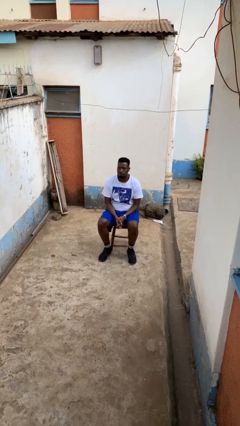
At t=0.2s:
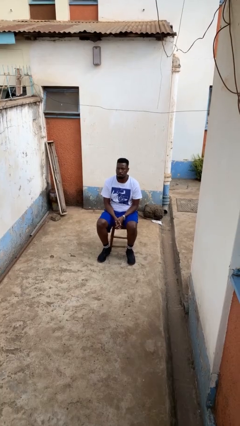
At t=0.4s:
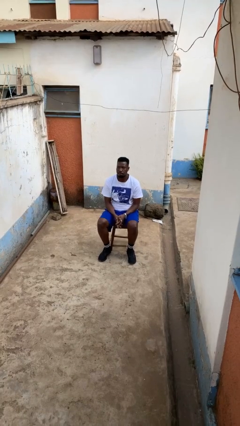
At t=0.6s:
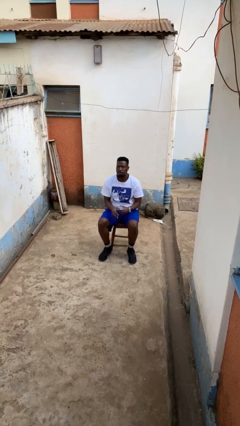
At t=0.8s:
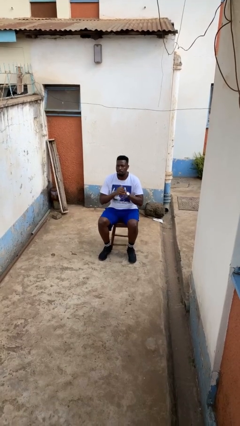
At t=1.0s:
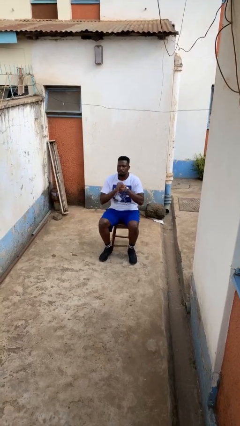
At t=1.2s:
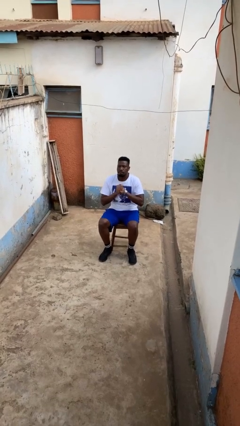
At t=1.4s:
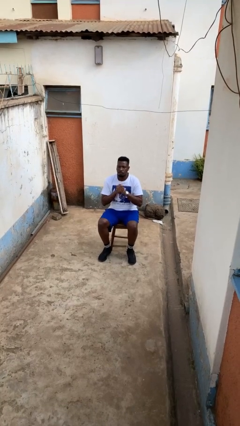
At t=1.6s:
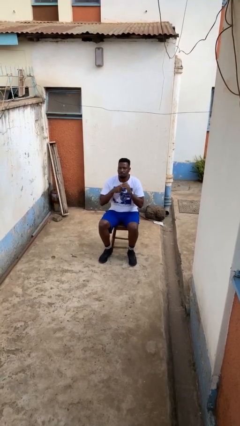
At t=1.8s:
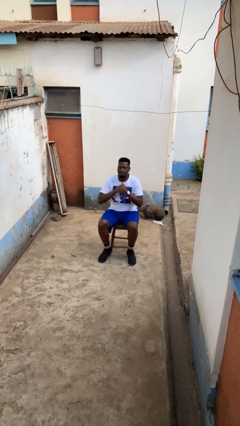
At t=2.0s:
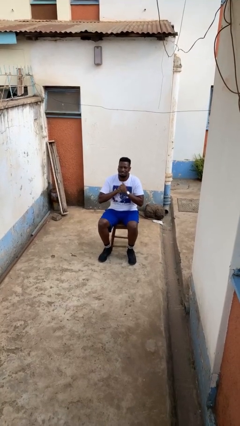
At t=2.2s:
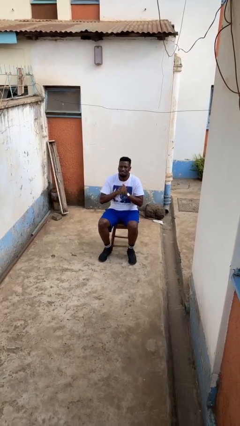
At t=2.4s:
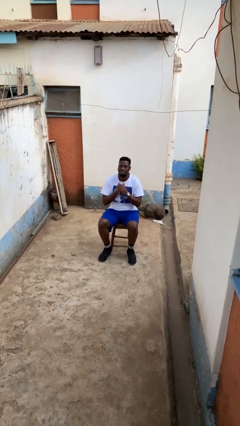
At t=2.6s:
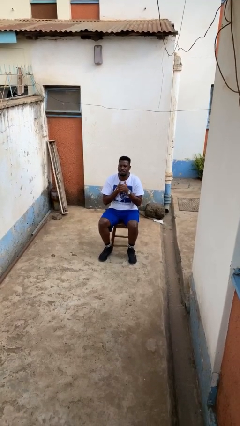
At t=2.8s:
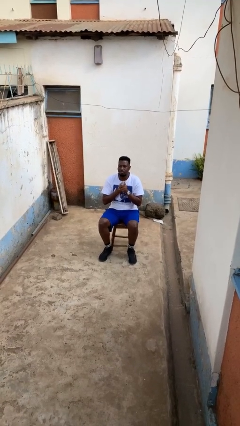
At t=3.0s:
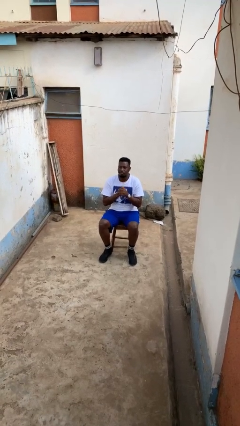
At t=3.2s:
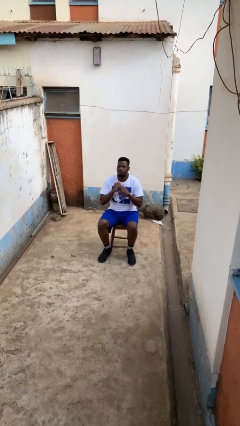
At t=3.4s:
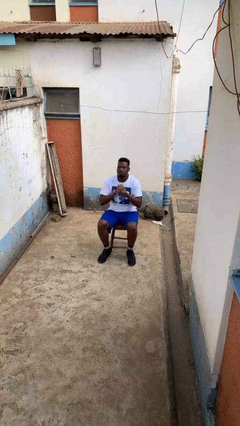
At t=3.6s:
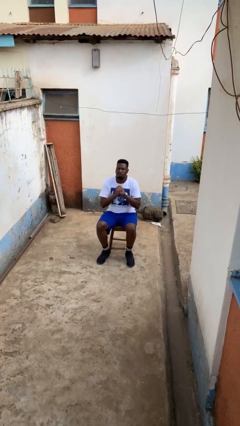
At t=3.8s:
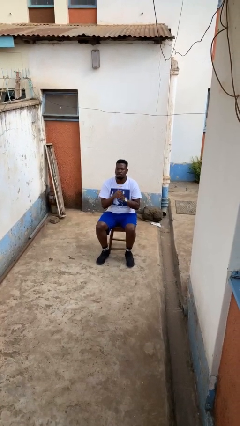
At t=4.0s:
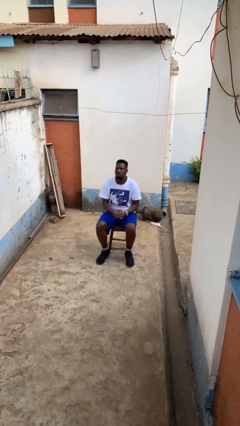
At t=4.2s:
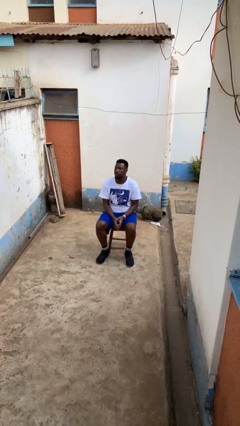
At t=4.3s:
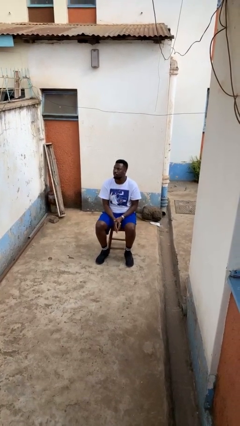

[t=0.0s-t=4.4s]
person cracks knuckles

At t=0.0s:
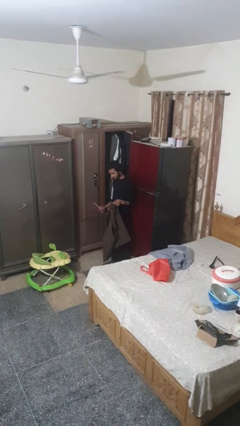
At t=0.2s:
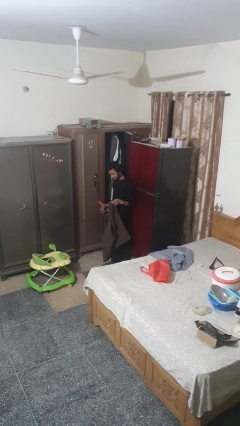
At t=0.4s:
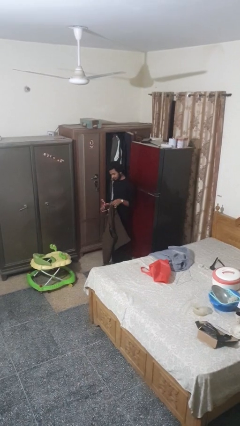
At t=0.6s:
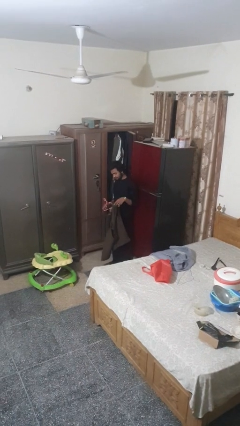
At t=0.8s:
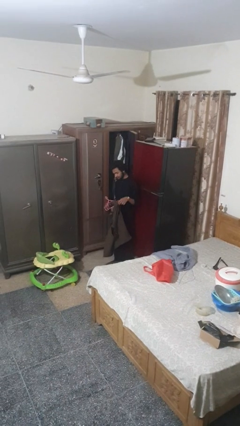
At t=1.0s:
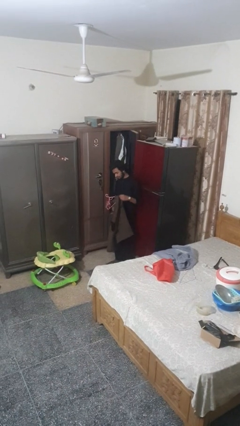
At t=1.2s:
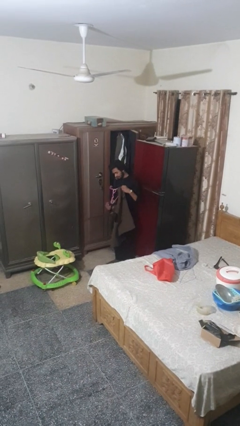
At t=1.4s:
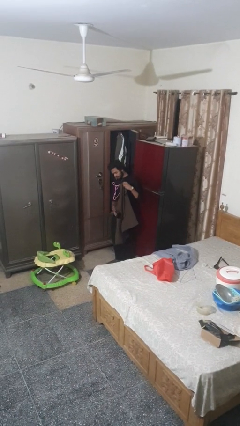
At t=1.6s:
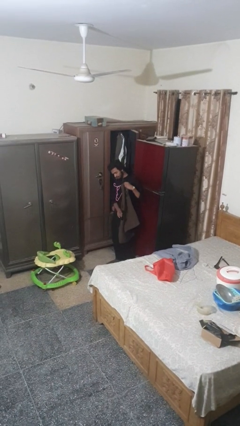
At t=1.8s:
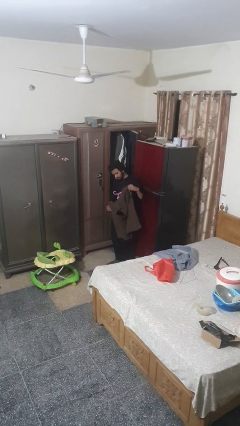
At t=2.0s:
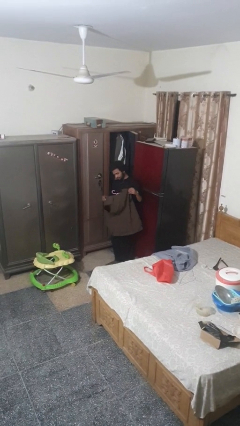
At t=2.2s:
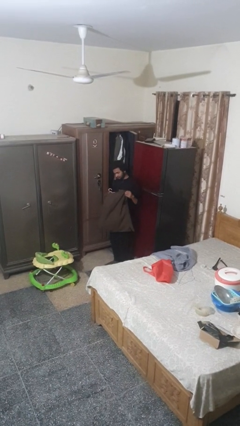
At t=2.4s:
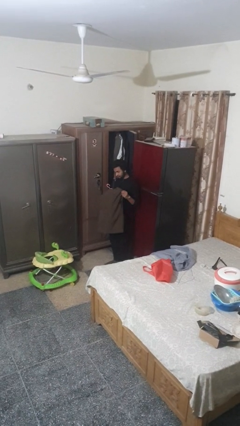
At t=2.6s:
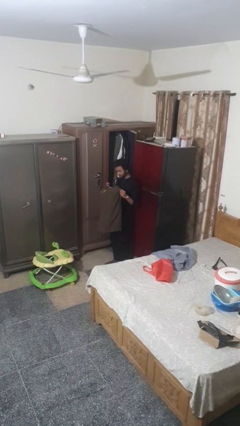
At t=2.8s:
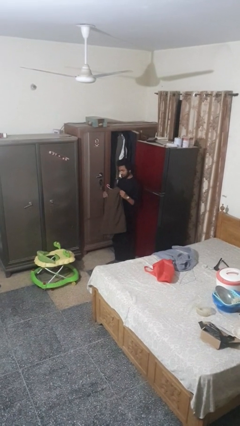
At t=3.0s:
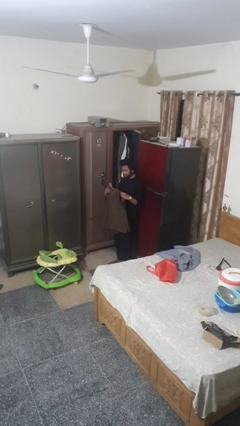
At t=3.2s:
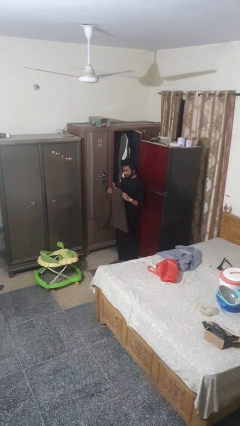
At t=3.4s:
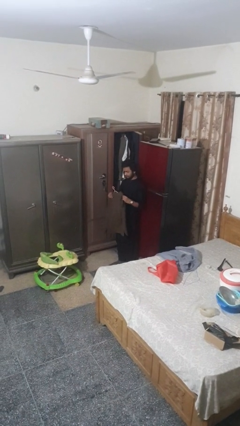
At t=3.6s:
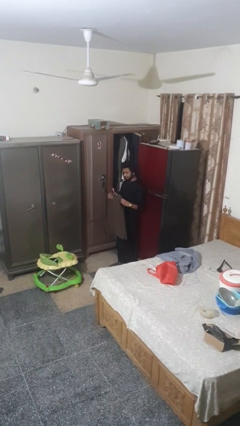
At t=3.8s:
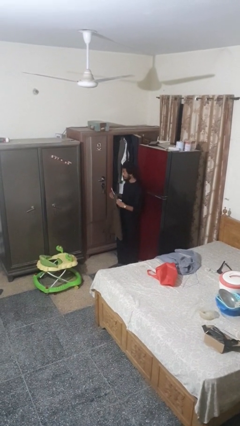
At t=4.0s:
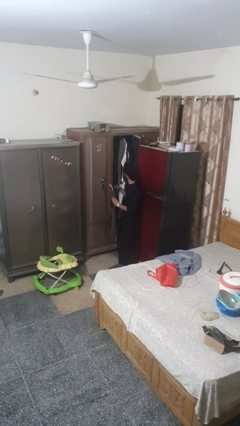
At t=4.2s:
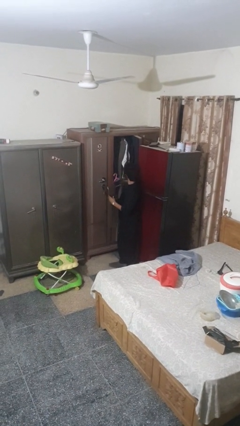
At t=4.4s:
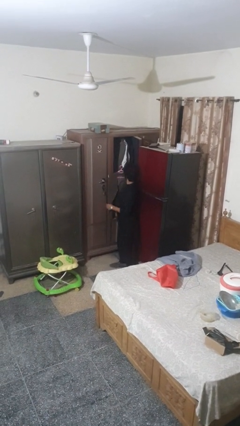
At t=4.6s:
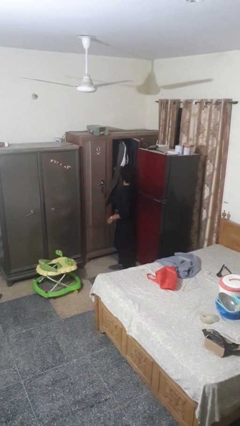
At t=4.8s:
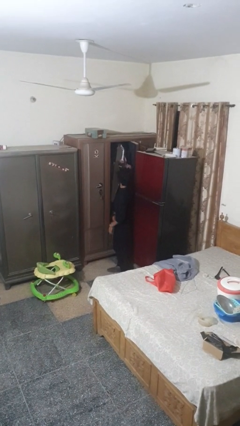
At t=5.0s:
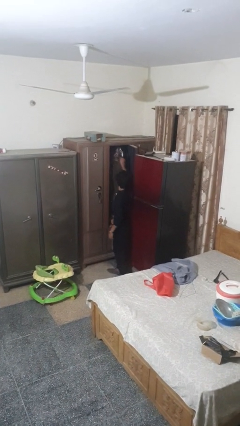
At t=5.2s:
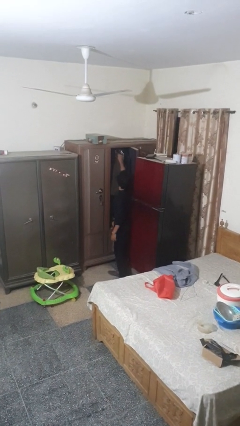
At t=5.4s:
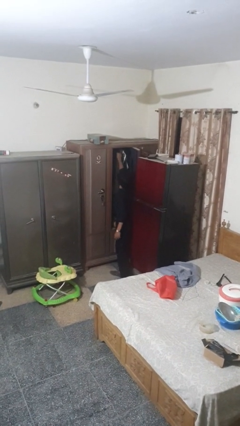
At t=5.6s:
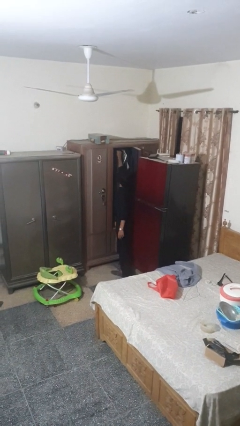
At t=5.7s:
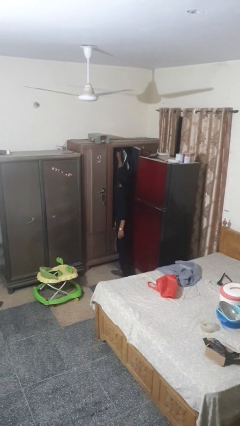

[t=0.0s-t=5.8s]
person puts clothes into closet

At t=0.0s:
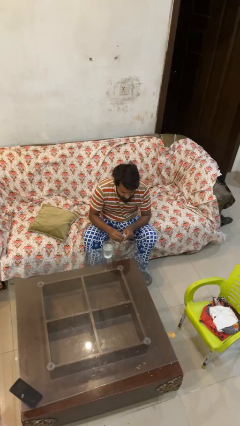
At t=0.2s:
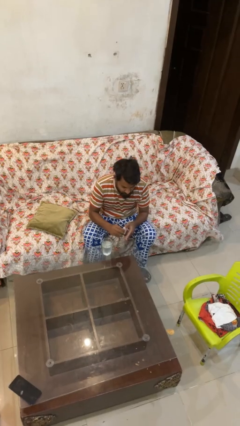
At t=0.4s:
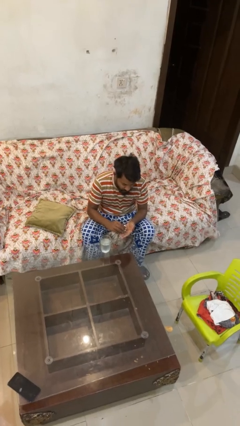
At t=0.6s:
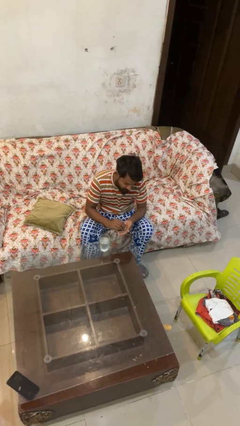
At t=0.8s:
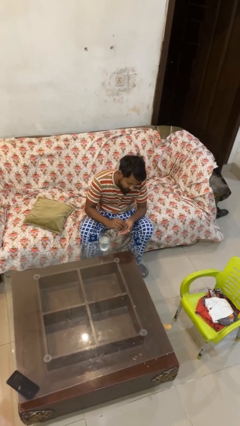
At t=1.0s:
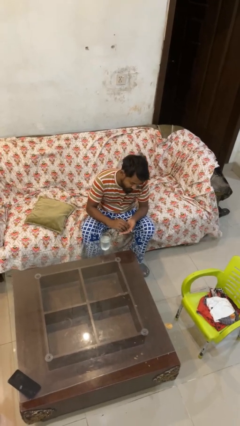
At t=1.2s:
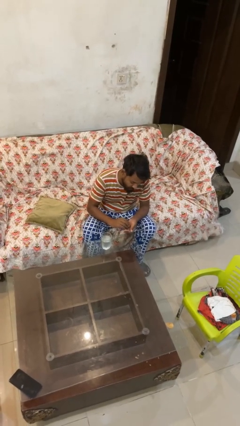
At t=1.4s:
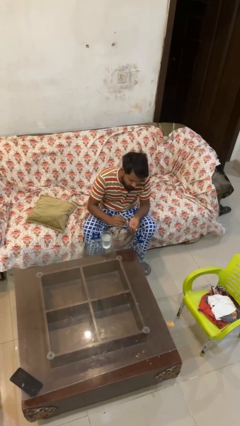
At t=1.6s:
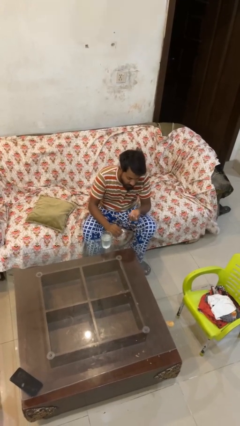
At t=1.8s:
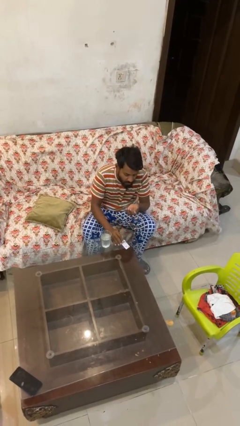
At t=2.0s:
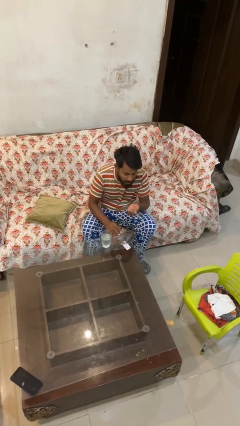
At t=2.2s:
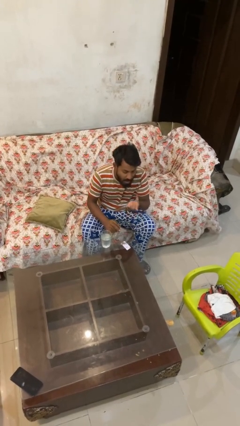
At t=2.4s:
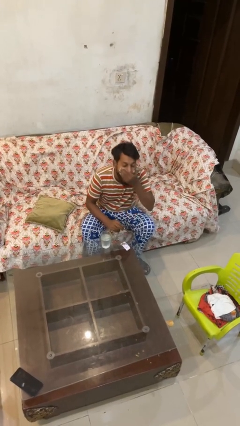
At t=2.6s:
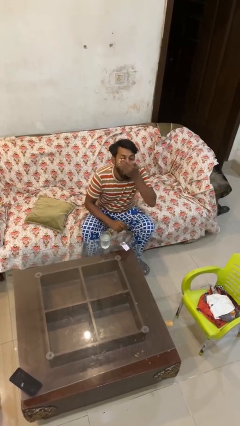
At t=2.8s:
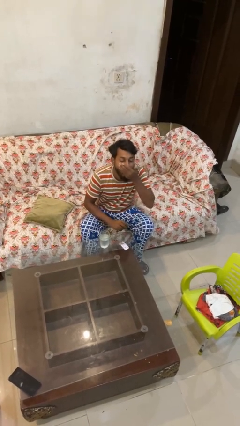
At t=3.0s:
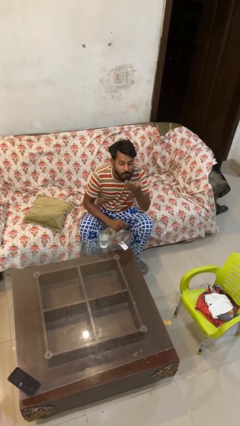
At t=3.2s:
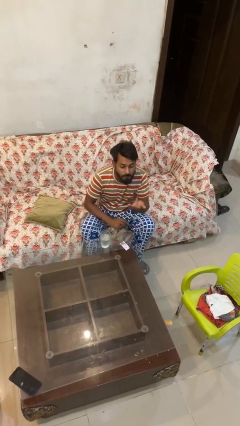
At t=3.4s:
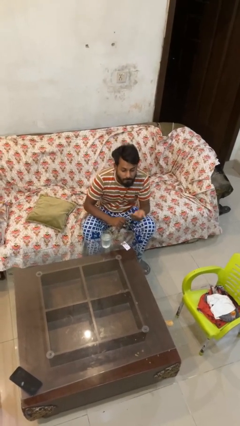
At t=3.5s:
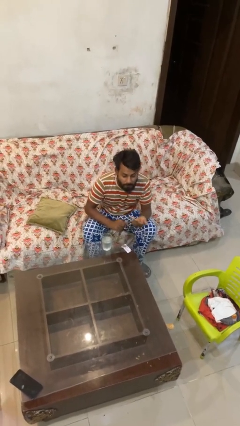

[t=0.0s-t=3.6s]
person takes medicine pills

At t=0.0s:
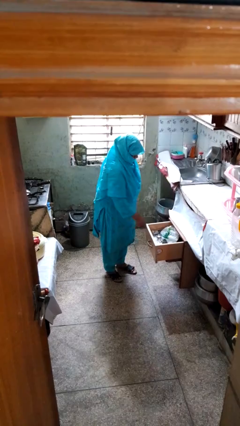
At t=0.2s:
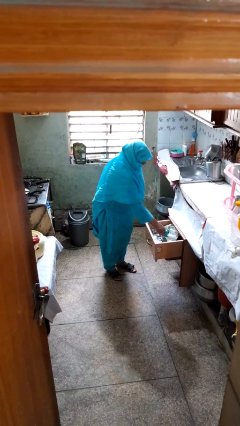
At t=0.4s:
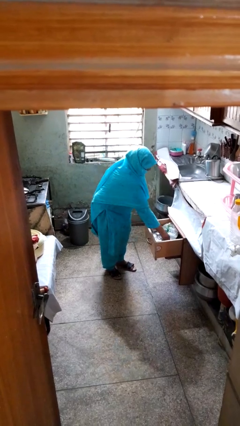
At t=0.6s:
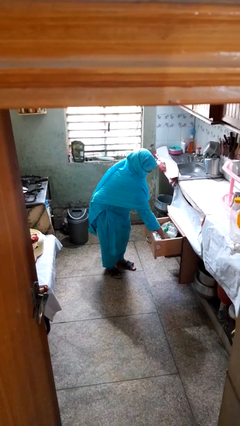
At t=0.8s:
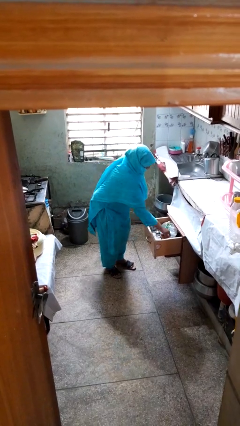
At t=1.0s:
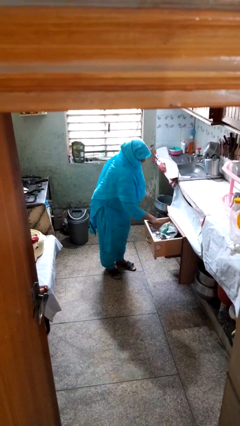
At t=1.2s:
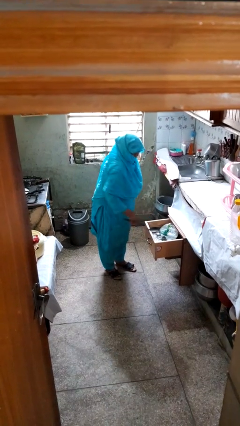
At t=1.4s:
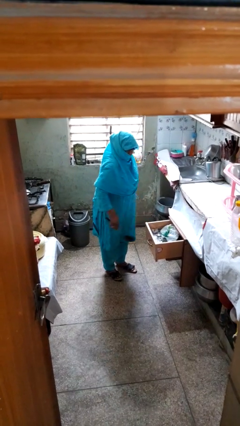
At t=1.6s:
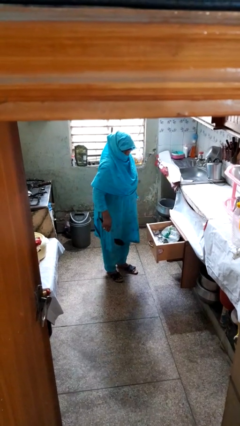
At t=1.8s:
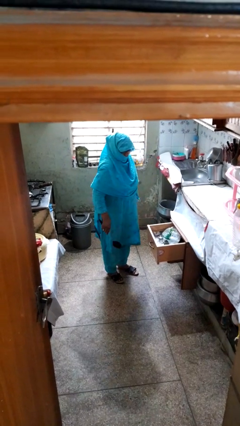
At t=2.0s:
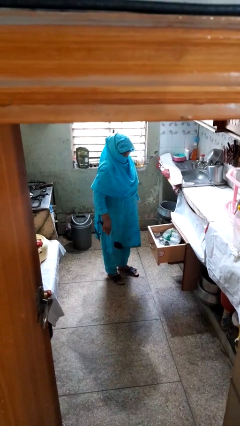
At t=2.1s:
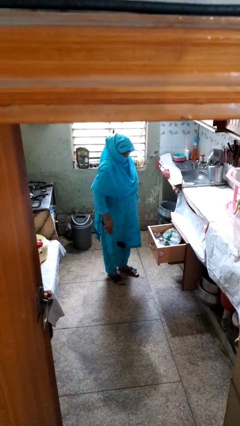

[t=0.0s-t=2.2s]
person takes object from kitchen drawer

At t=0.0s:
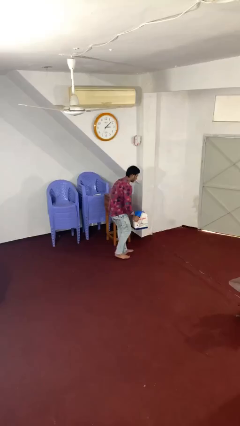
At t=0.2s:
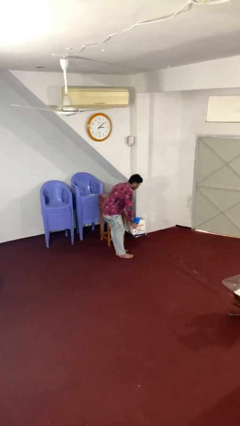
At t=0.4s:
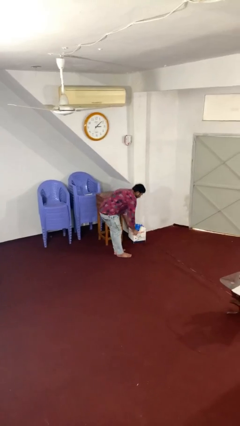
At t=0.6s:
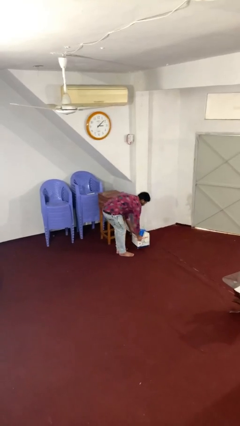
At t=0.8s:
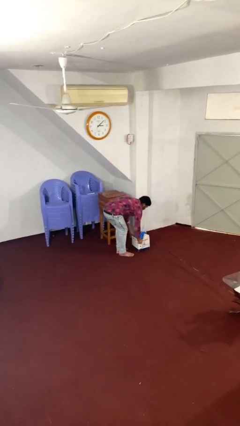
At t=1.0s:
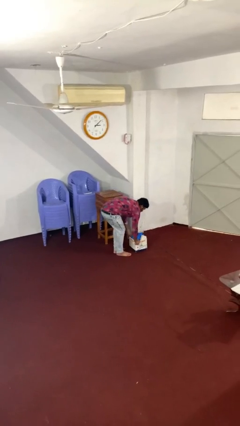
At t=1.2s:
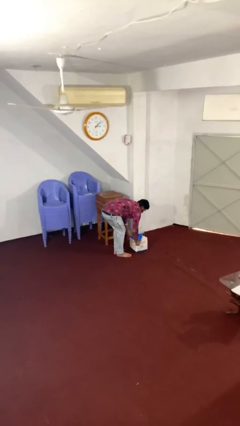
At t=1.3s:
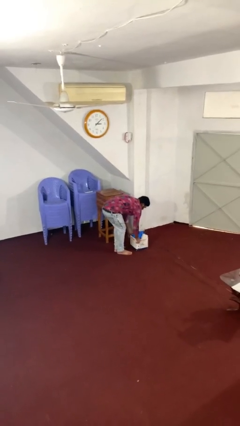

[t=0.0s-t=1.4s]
person puts down object on floor

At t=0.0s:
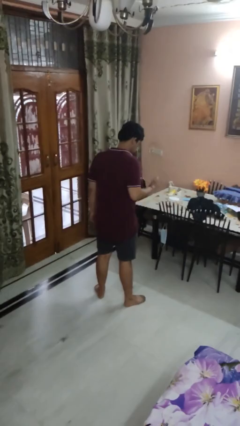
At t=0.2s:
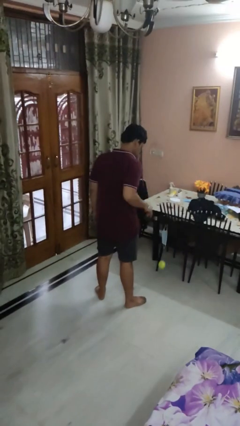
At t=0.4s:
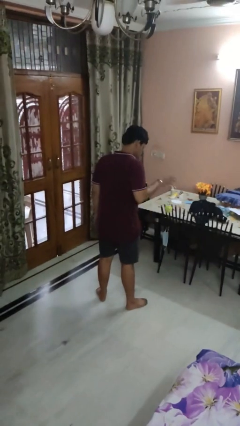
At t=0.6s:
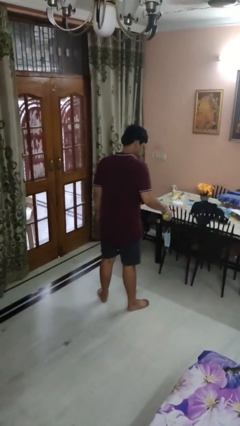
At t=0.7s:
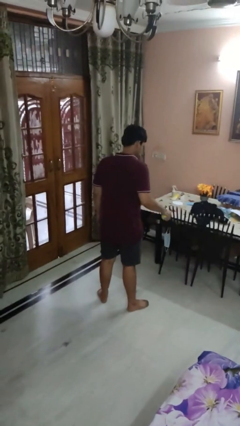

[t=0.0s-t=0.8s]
person bounces ball on floor
